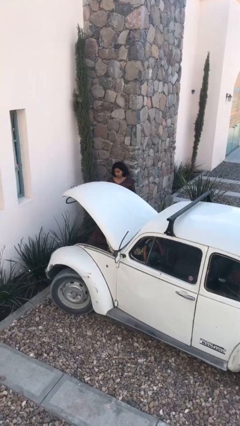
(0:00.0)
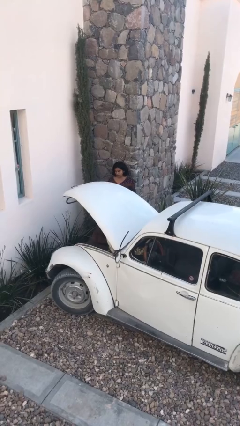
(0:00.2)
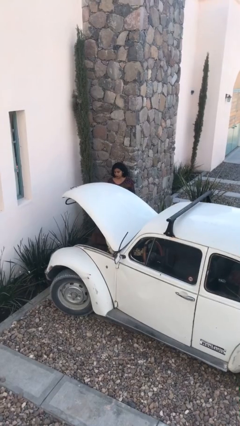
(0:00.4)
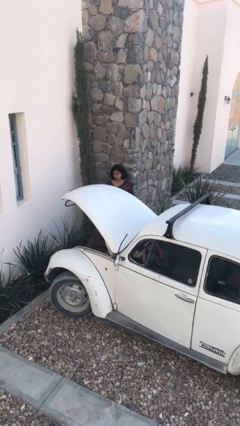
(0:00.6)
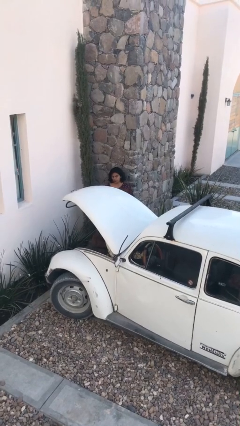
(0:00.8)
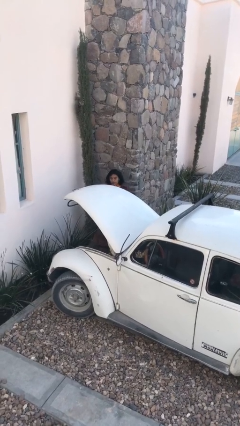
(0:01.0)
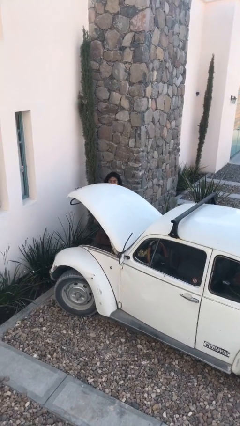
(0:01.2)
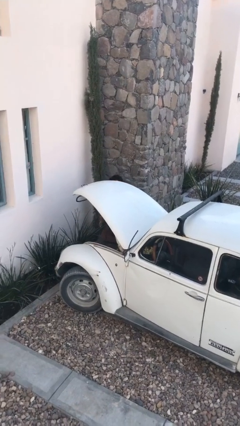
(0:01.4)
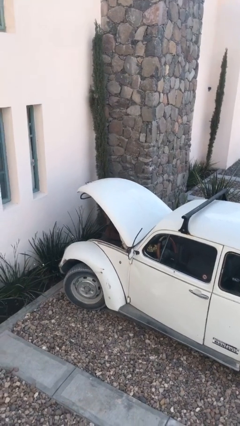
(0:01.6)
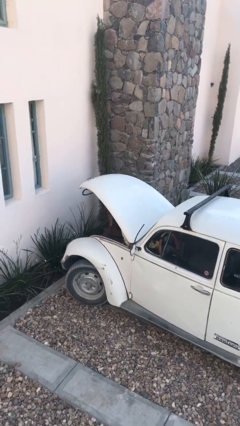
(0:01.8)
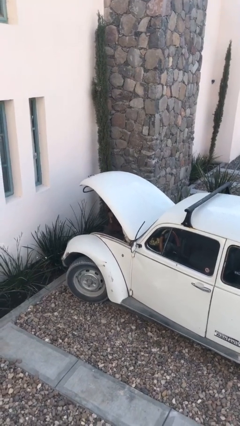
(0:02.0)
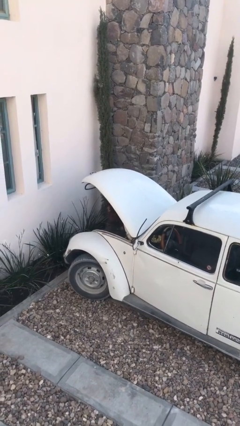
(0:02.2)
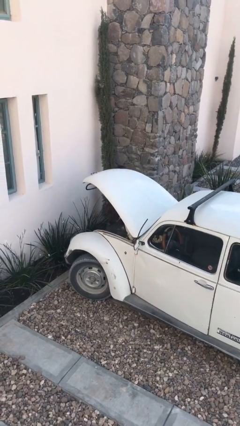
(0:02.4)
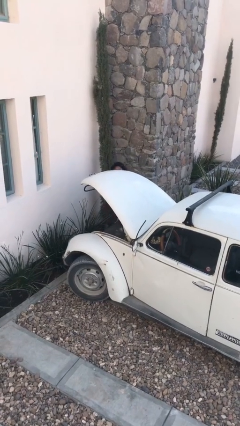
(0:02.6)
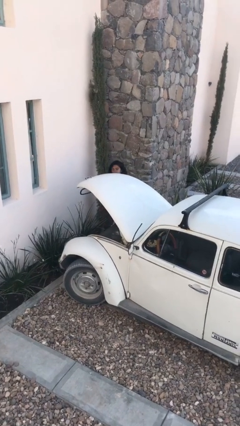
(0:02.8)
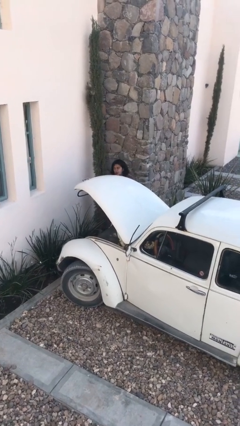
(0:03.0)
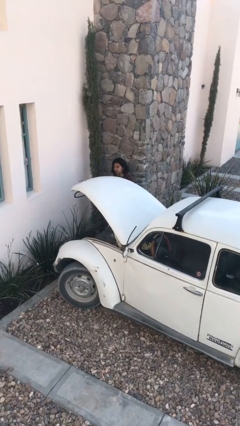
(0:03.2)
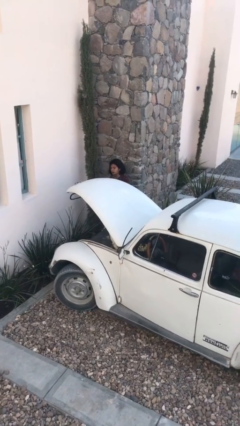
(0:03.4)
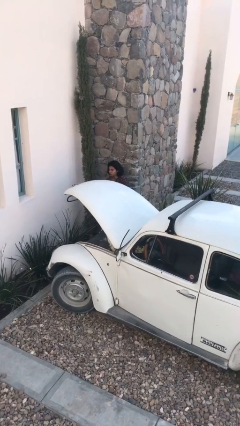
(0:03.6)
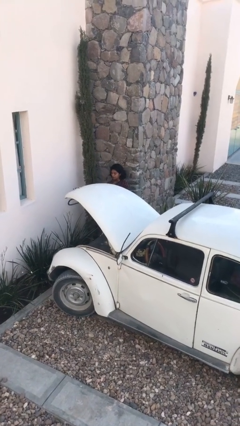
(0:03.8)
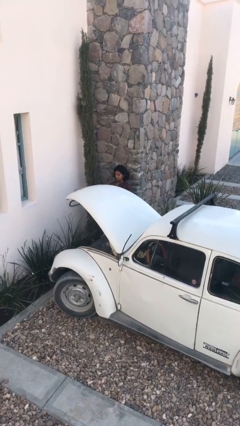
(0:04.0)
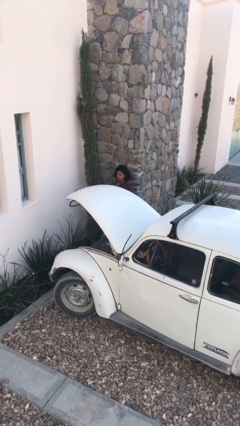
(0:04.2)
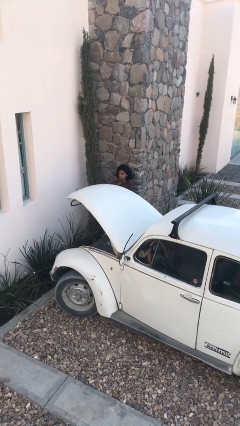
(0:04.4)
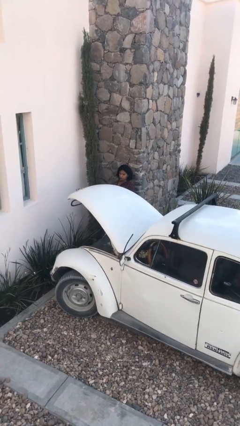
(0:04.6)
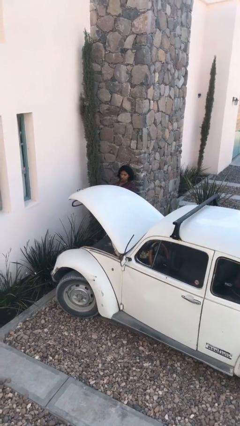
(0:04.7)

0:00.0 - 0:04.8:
person unloads car

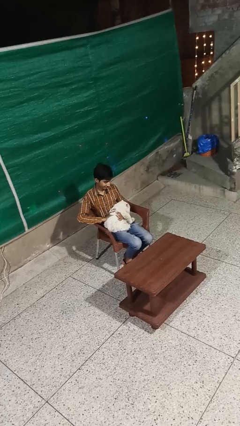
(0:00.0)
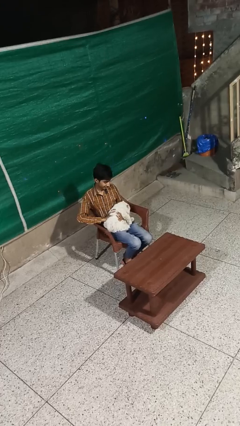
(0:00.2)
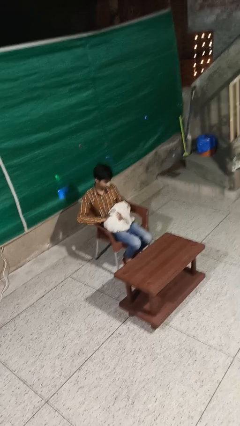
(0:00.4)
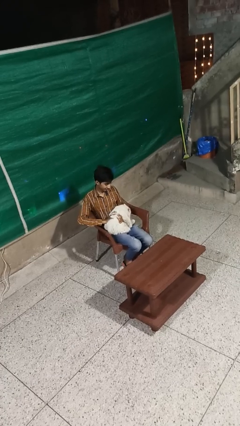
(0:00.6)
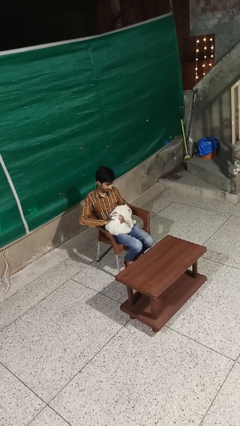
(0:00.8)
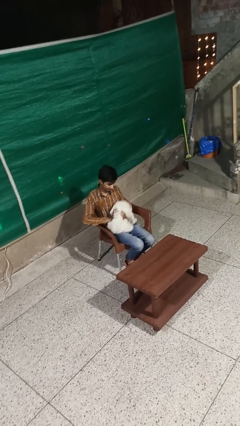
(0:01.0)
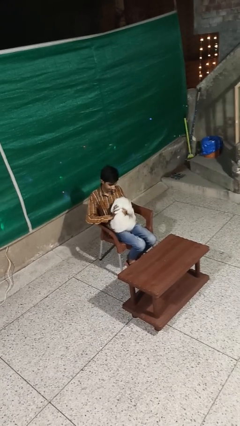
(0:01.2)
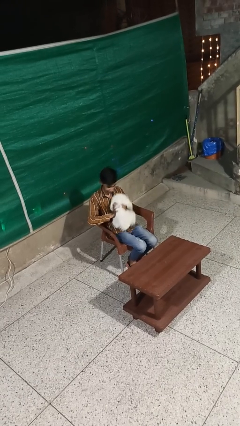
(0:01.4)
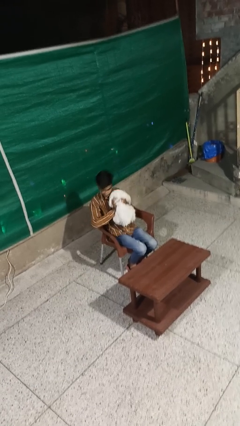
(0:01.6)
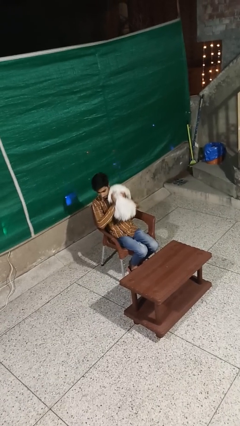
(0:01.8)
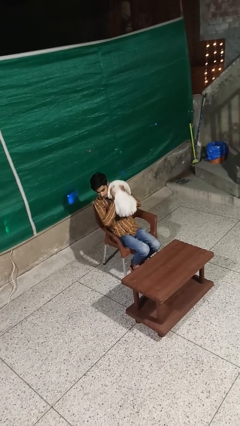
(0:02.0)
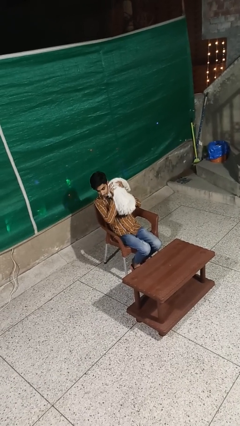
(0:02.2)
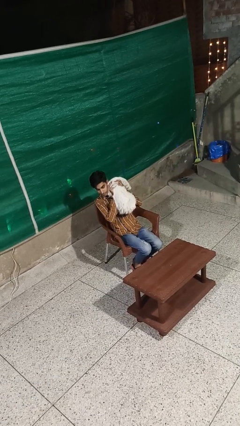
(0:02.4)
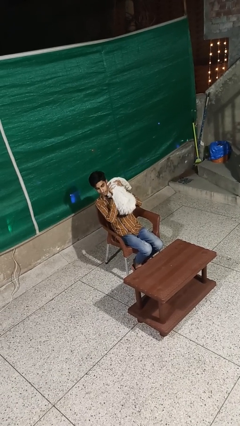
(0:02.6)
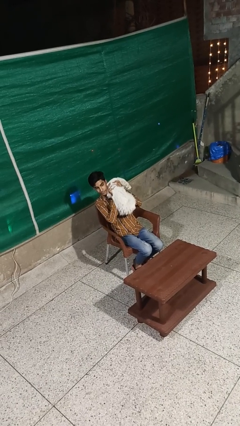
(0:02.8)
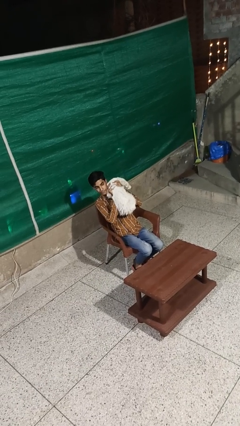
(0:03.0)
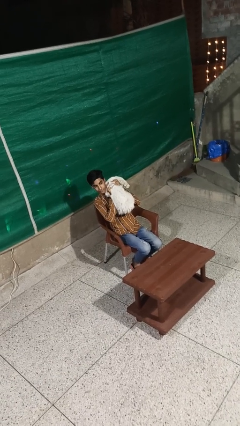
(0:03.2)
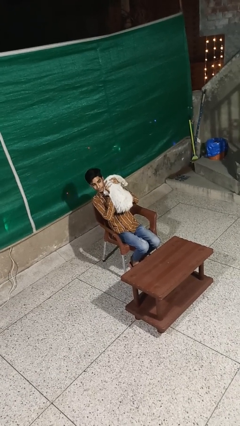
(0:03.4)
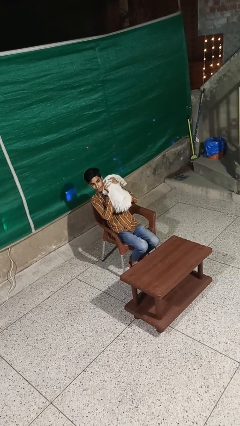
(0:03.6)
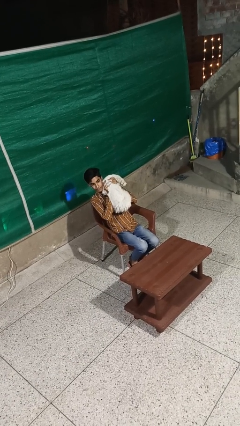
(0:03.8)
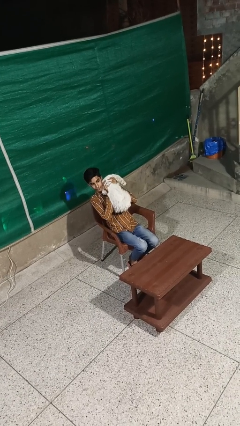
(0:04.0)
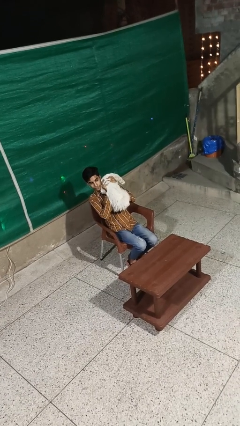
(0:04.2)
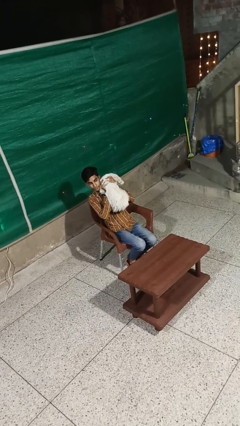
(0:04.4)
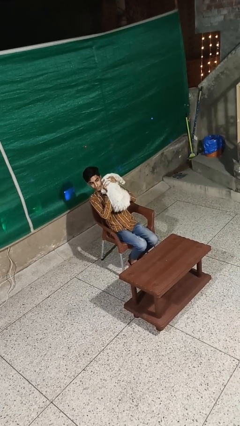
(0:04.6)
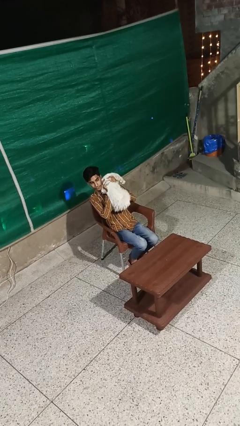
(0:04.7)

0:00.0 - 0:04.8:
person hugs cat

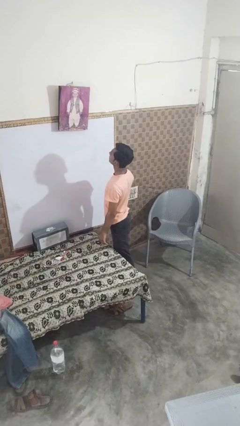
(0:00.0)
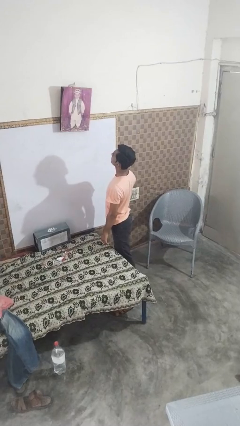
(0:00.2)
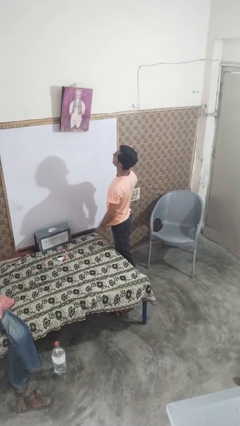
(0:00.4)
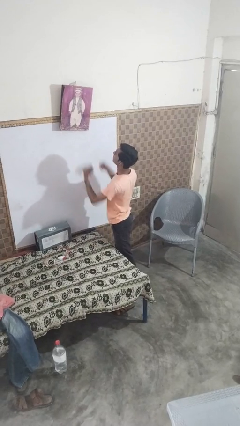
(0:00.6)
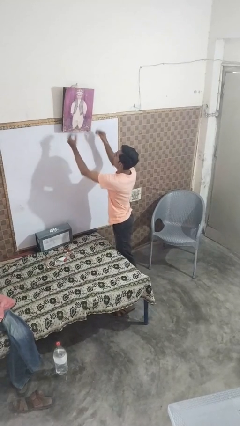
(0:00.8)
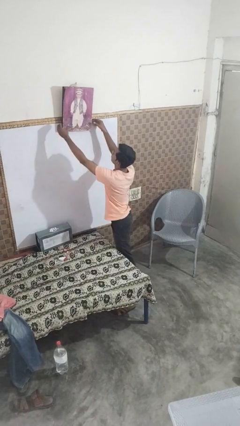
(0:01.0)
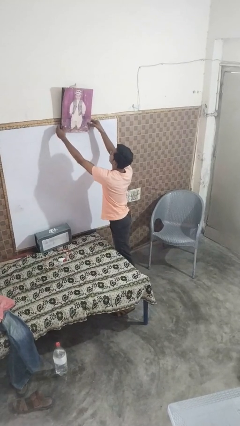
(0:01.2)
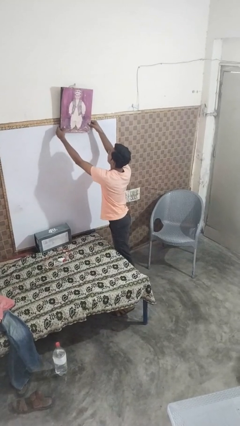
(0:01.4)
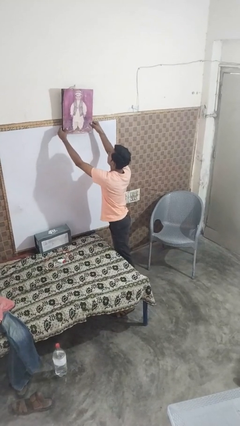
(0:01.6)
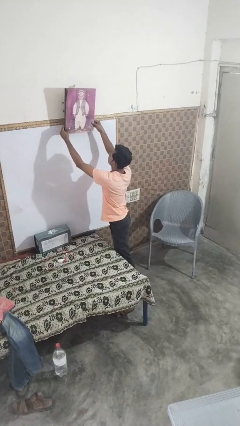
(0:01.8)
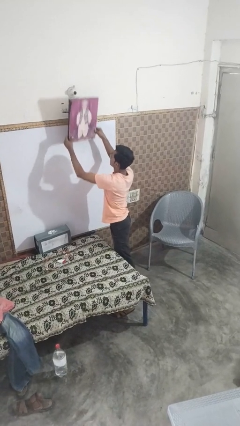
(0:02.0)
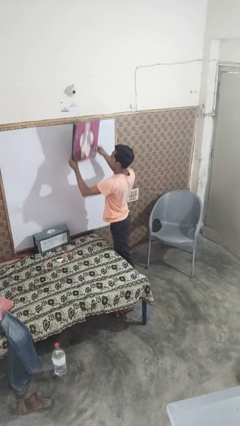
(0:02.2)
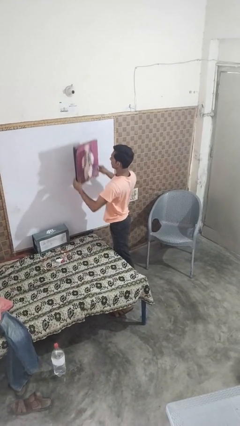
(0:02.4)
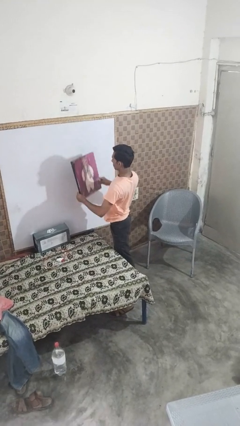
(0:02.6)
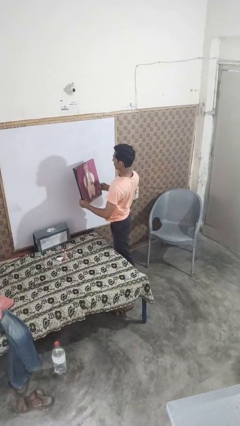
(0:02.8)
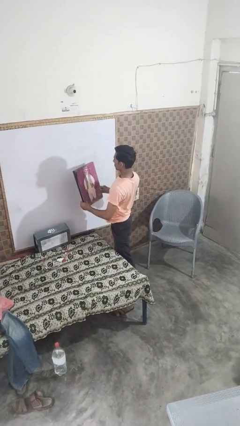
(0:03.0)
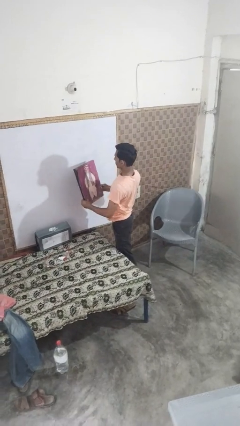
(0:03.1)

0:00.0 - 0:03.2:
person takes down picture frame

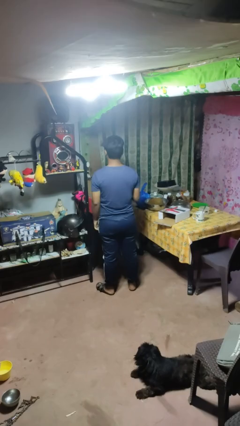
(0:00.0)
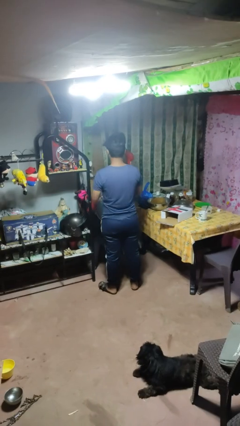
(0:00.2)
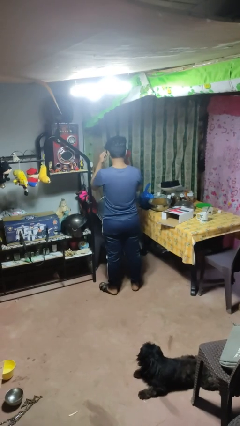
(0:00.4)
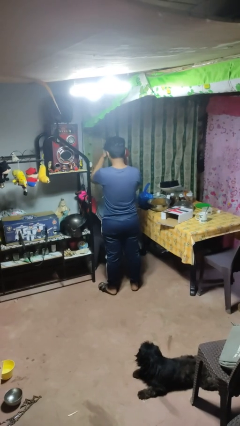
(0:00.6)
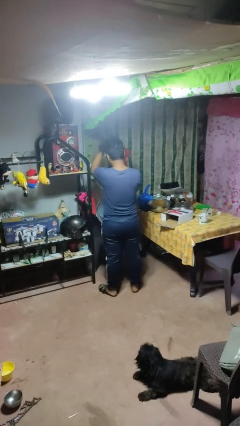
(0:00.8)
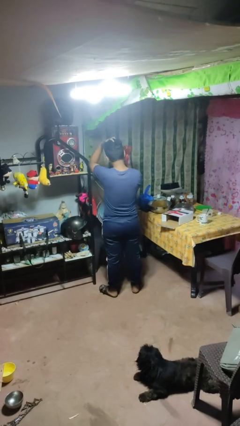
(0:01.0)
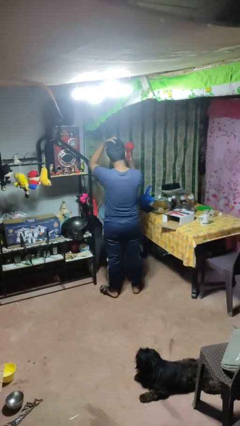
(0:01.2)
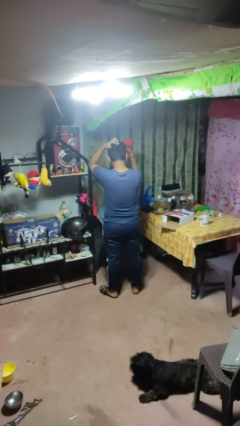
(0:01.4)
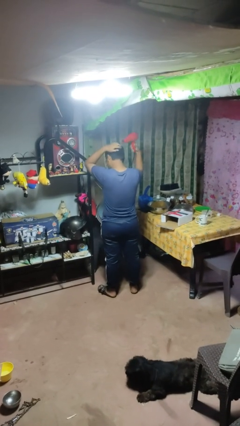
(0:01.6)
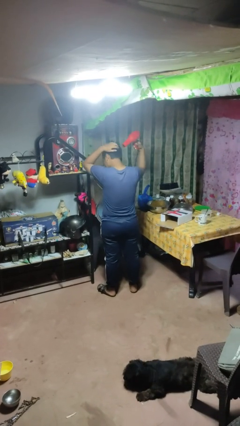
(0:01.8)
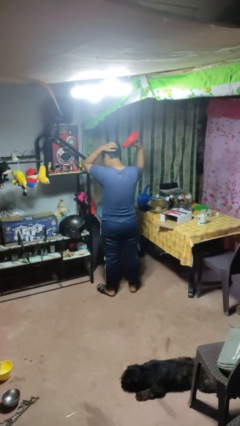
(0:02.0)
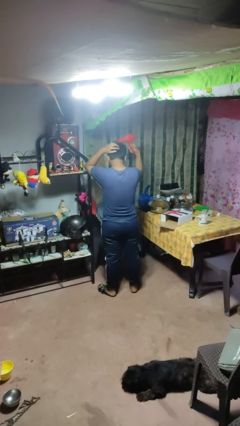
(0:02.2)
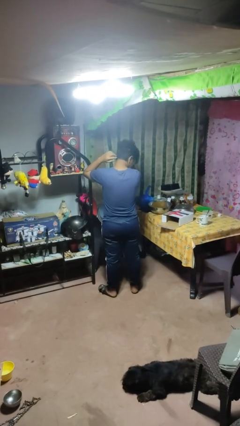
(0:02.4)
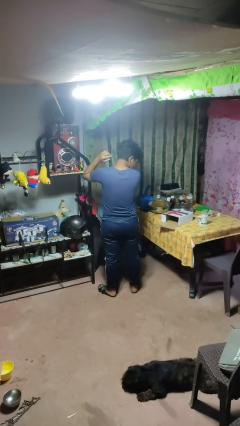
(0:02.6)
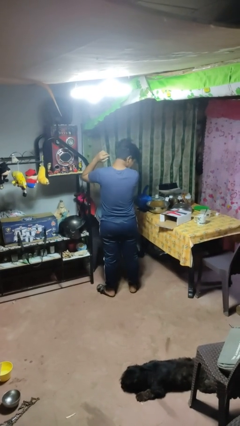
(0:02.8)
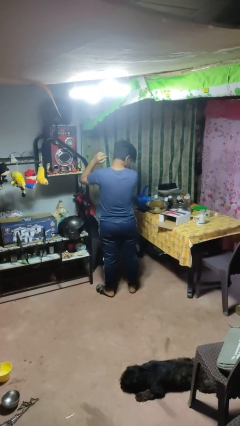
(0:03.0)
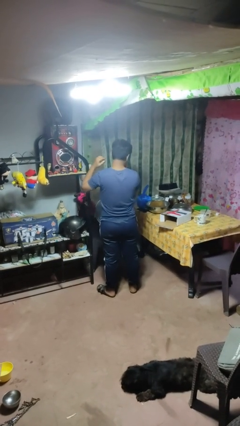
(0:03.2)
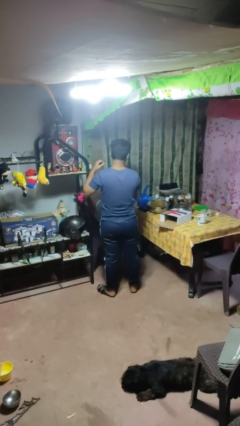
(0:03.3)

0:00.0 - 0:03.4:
person dries hair with hairdryer

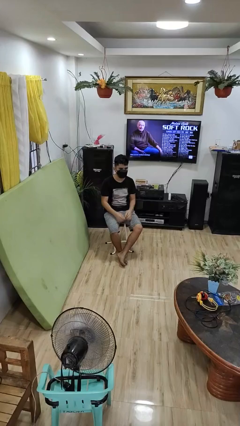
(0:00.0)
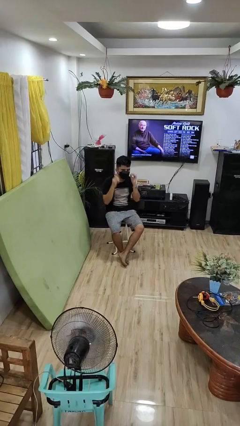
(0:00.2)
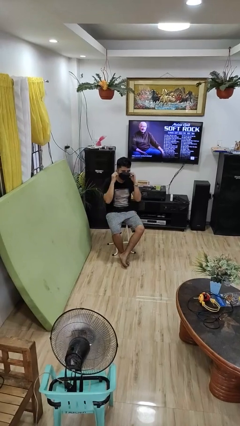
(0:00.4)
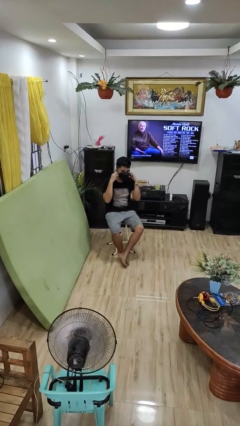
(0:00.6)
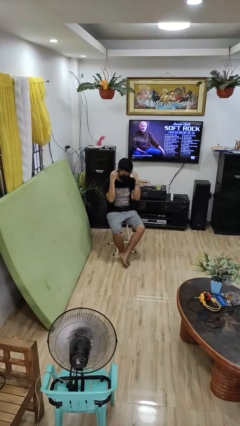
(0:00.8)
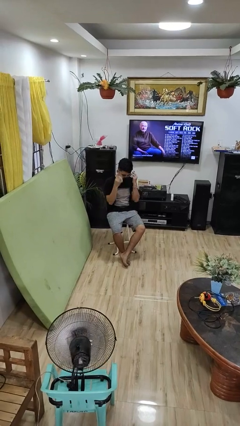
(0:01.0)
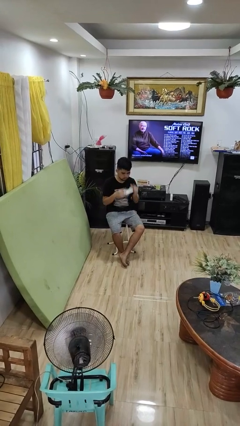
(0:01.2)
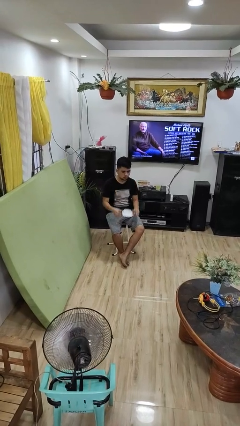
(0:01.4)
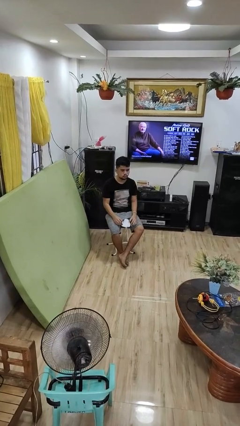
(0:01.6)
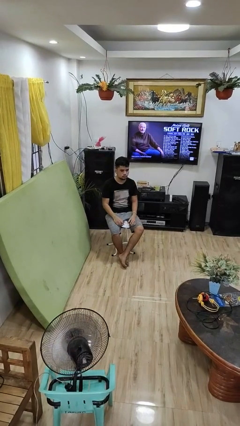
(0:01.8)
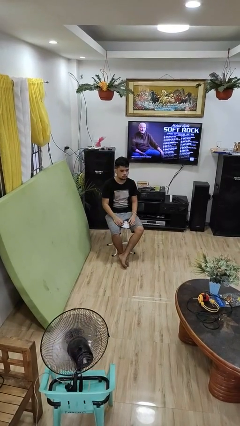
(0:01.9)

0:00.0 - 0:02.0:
person takes off facemask
